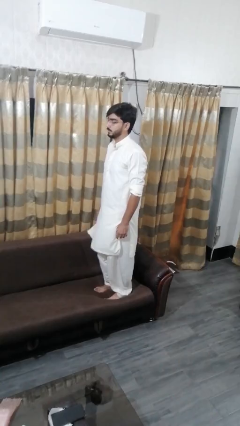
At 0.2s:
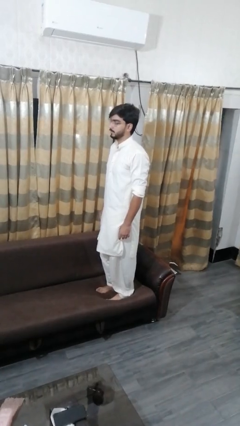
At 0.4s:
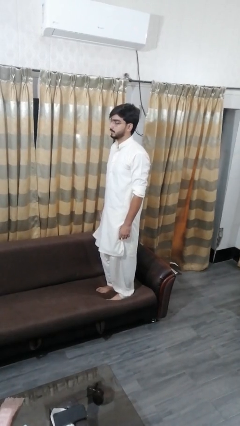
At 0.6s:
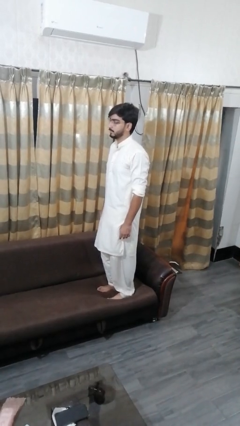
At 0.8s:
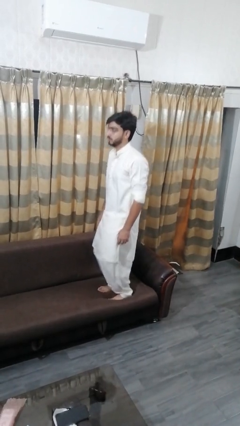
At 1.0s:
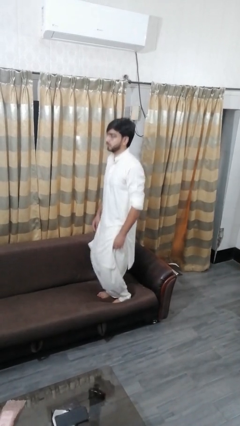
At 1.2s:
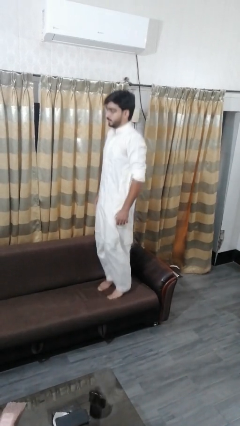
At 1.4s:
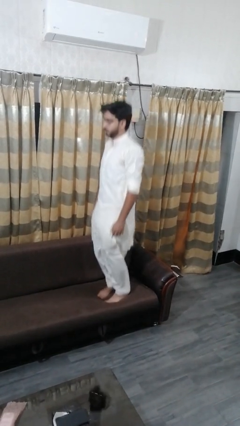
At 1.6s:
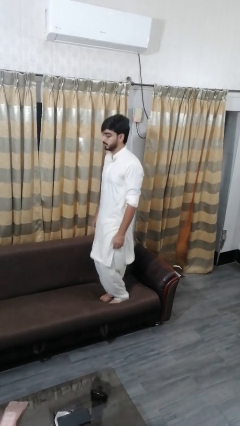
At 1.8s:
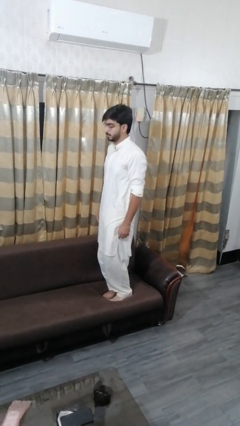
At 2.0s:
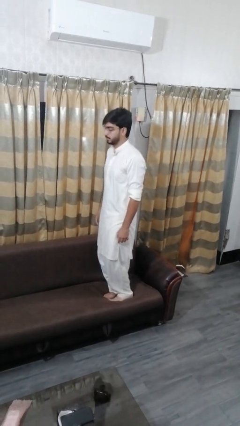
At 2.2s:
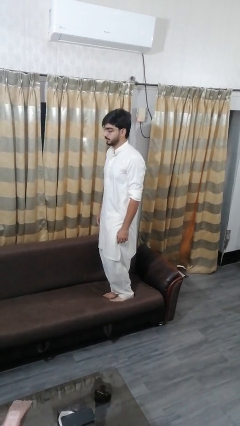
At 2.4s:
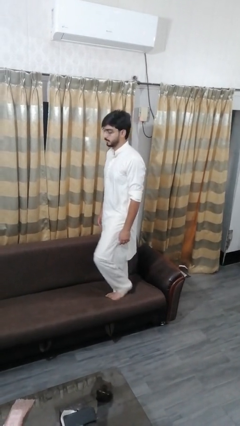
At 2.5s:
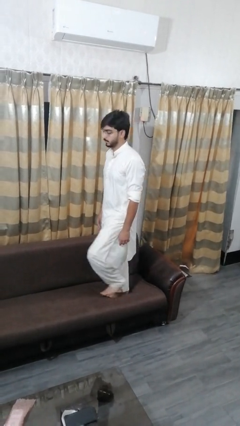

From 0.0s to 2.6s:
person jumps on couch

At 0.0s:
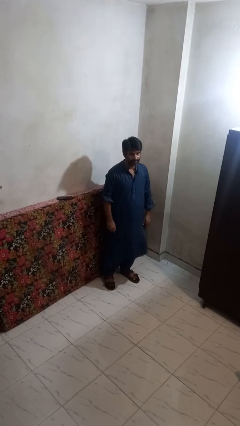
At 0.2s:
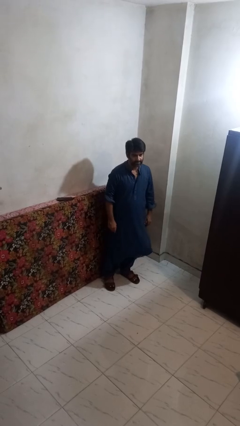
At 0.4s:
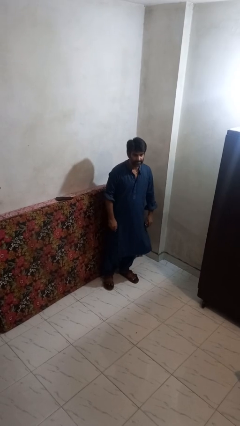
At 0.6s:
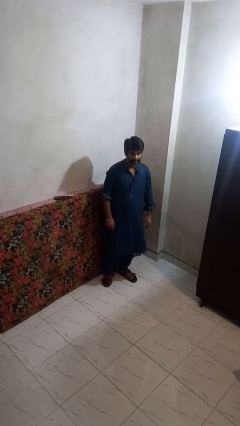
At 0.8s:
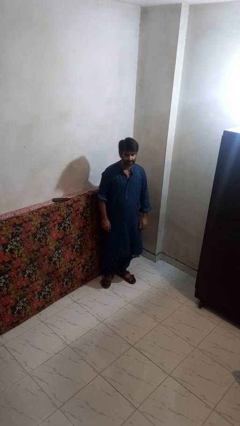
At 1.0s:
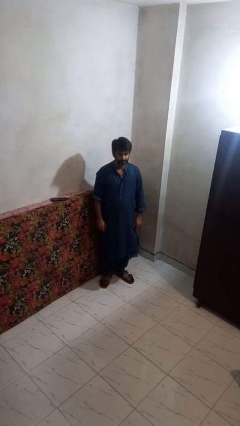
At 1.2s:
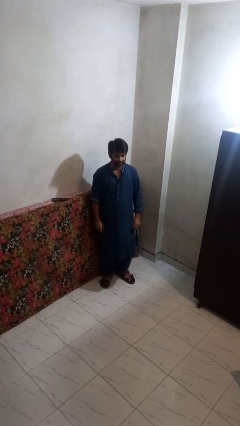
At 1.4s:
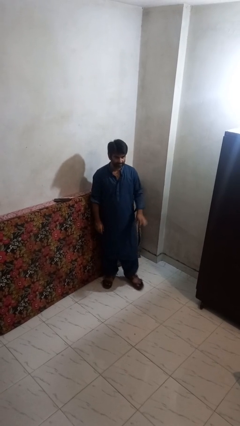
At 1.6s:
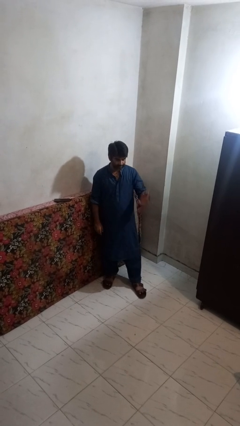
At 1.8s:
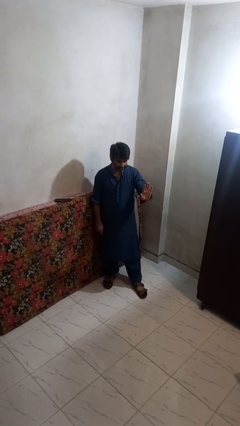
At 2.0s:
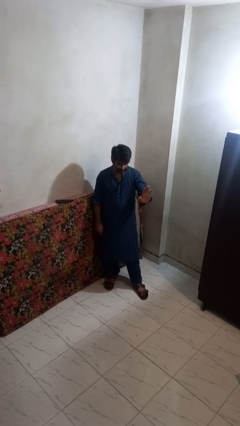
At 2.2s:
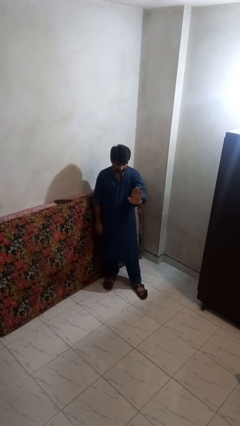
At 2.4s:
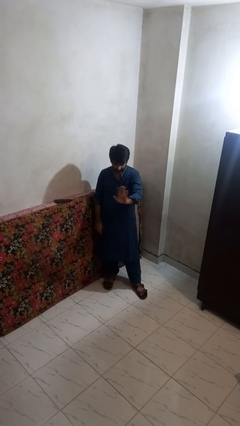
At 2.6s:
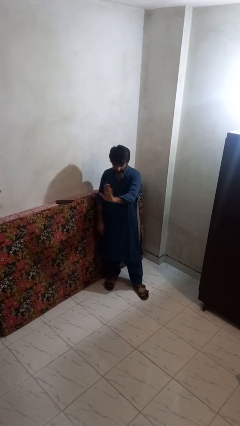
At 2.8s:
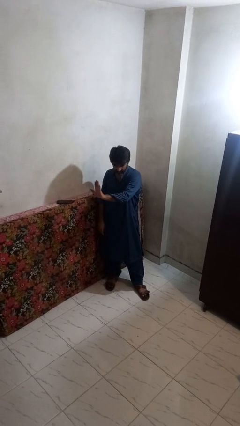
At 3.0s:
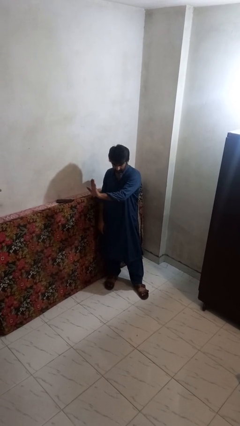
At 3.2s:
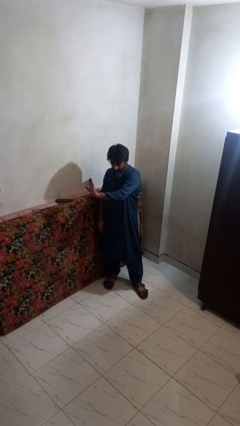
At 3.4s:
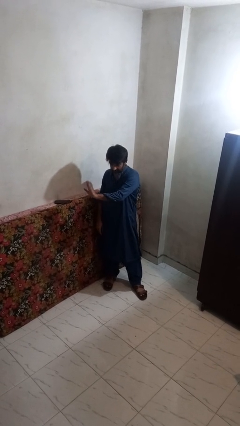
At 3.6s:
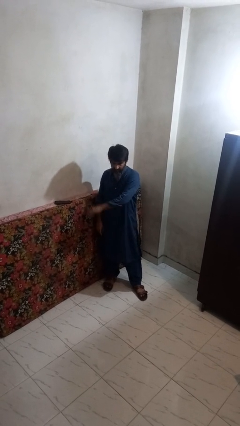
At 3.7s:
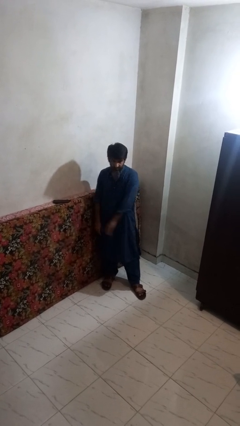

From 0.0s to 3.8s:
person gestures swipe right

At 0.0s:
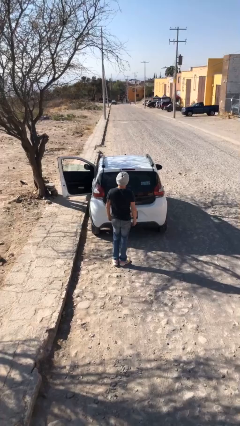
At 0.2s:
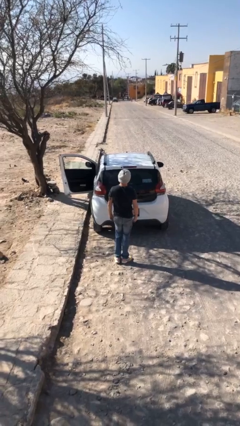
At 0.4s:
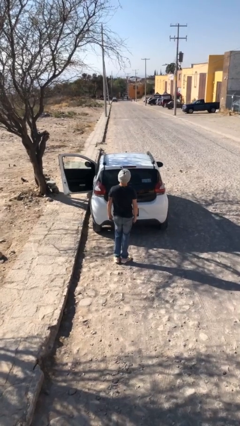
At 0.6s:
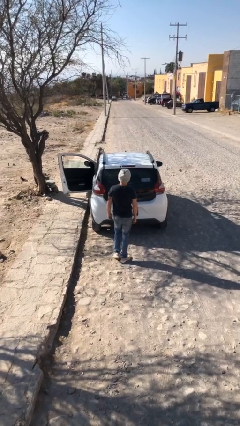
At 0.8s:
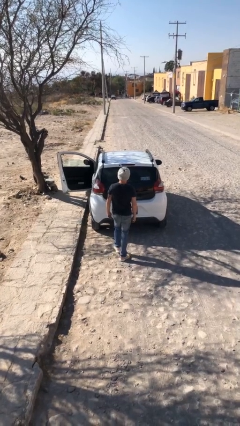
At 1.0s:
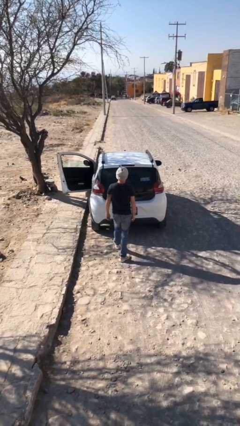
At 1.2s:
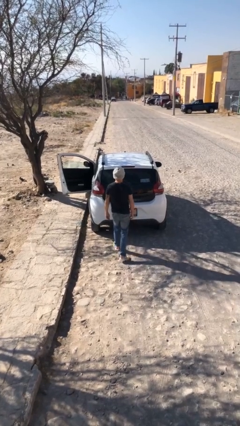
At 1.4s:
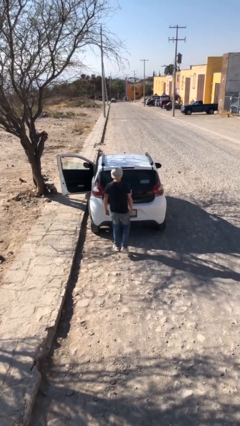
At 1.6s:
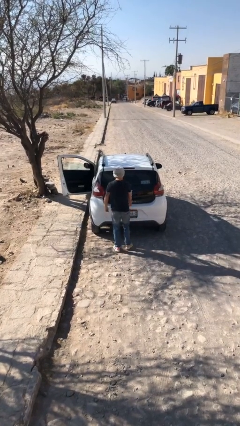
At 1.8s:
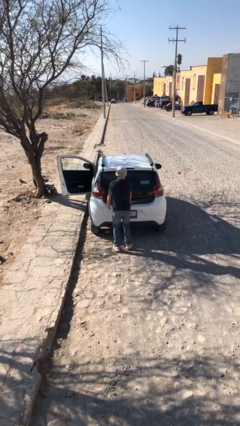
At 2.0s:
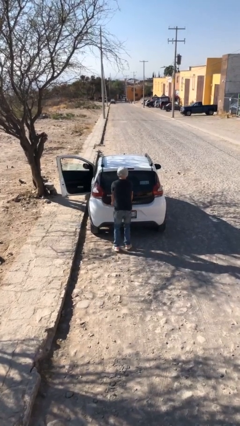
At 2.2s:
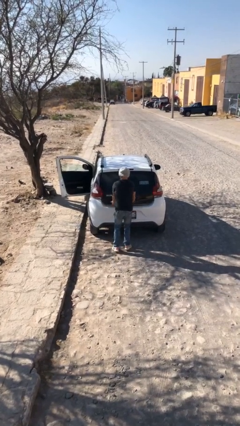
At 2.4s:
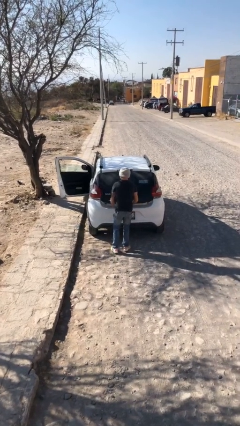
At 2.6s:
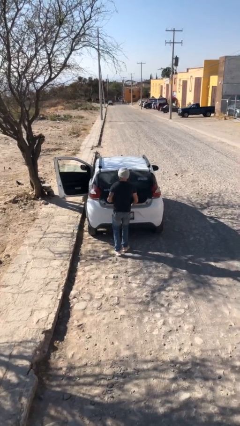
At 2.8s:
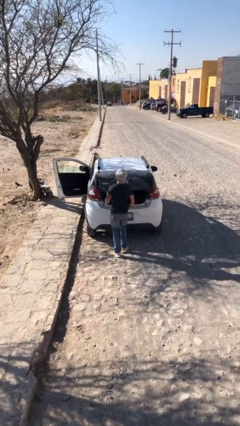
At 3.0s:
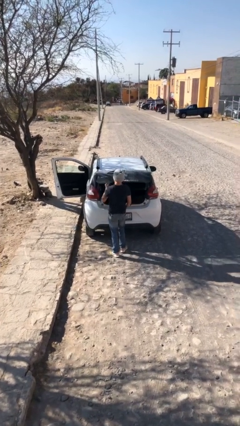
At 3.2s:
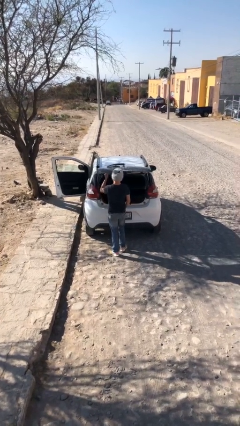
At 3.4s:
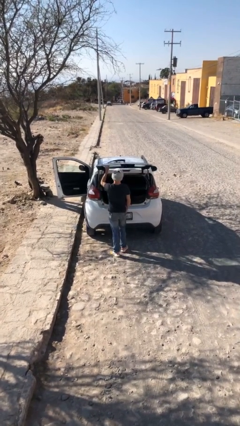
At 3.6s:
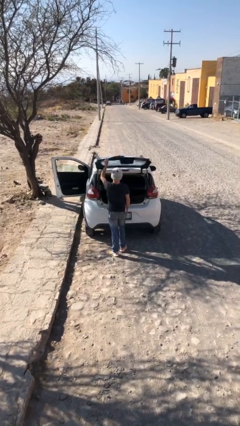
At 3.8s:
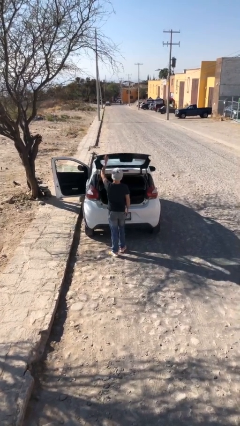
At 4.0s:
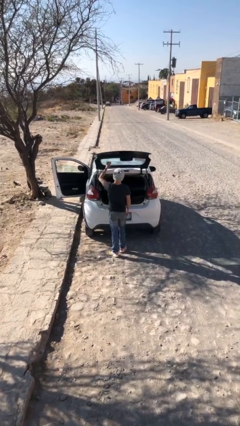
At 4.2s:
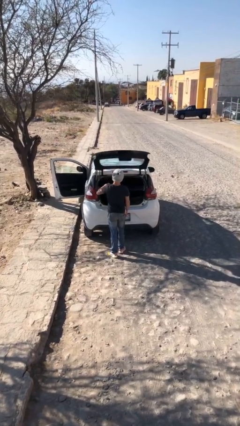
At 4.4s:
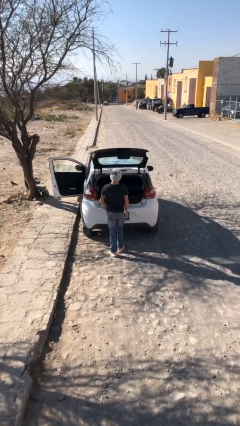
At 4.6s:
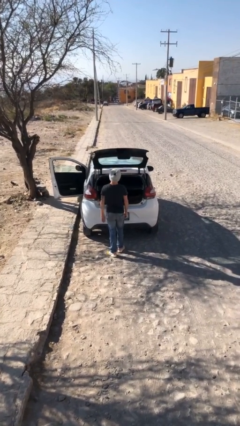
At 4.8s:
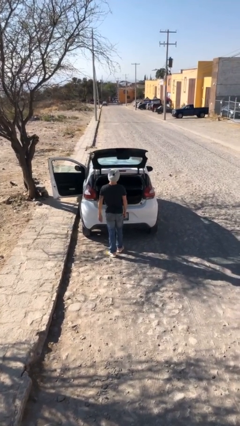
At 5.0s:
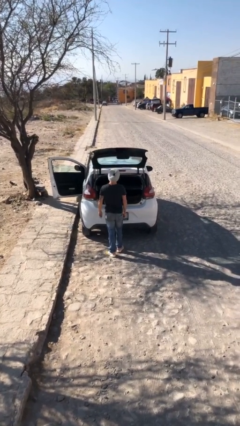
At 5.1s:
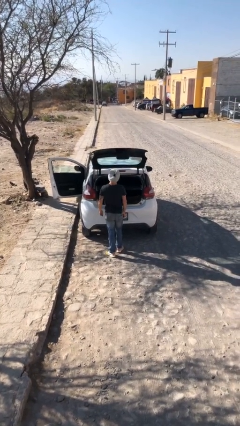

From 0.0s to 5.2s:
person opens car trunk

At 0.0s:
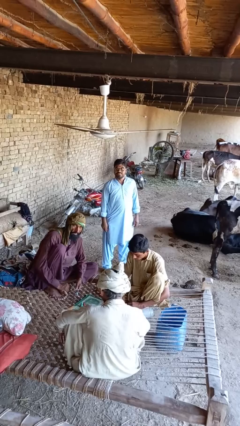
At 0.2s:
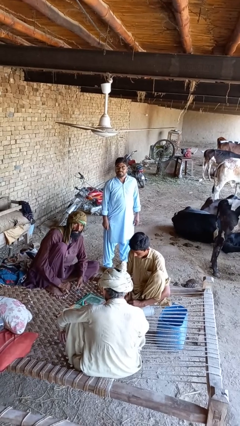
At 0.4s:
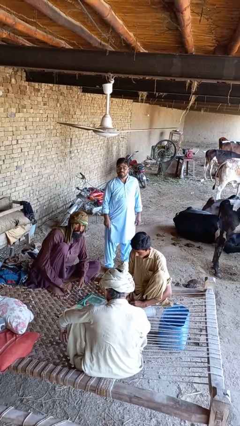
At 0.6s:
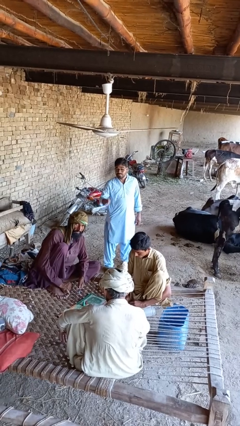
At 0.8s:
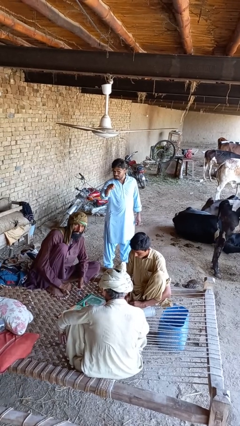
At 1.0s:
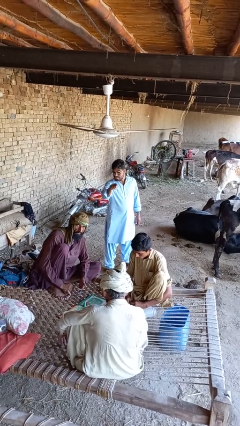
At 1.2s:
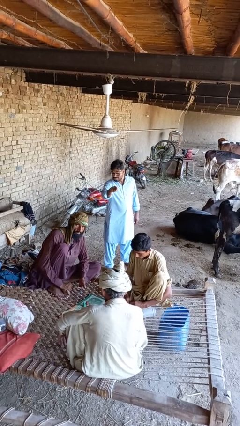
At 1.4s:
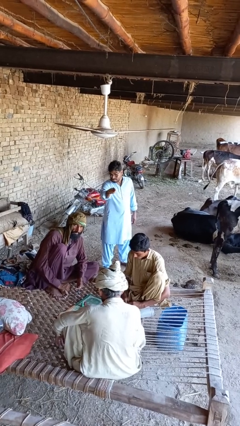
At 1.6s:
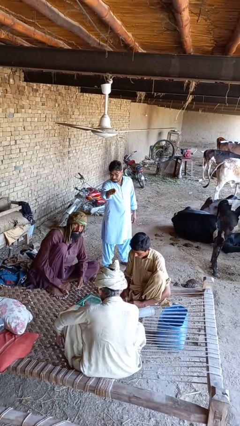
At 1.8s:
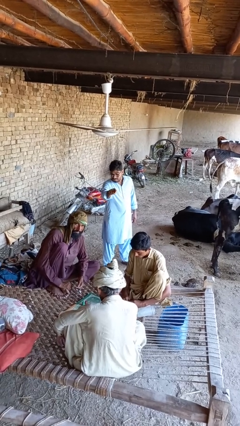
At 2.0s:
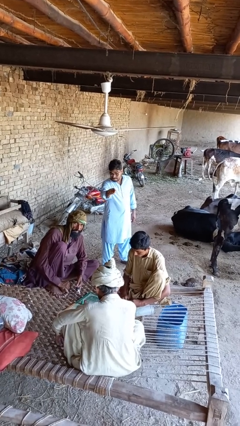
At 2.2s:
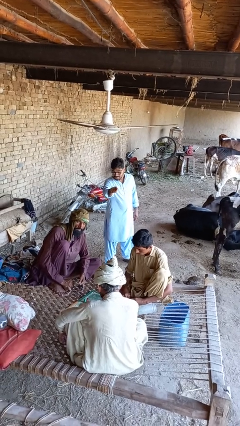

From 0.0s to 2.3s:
person points at person

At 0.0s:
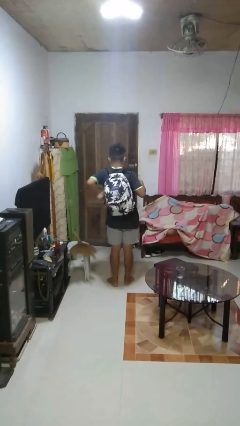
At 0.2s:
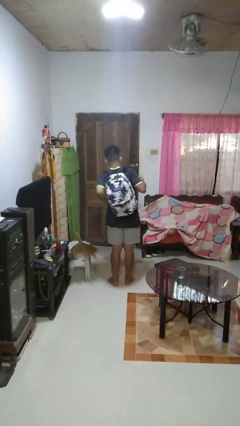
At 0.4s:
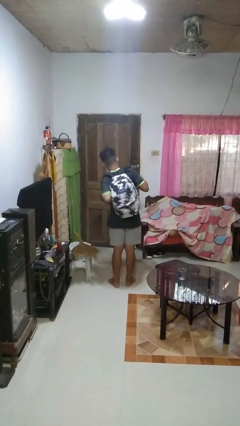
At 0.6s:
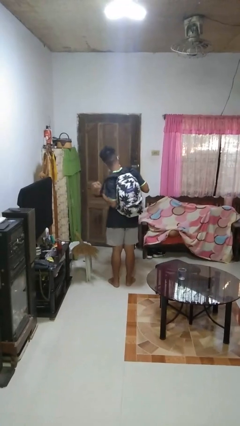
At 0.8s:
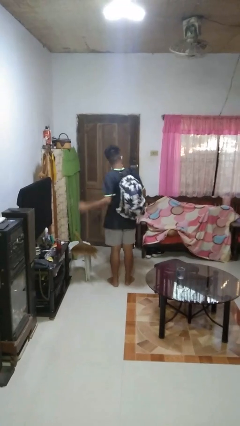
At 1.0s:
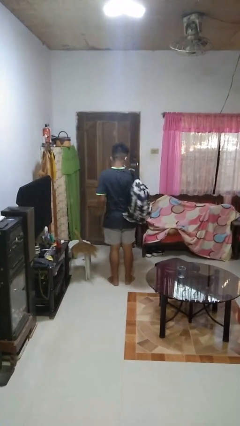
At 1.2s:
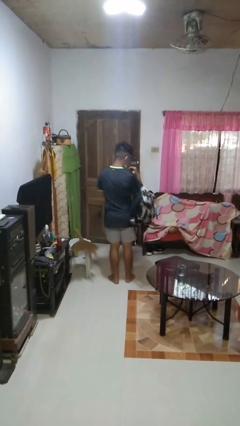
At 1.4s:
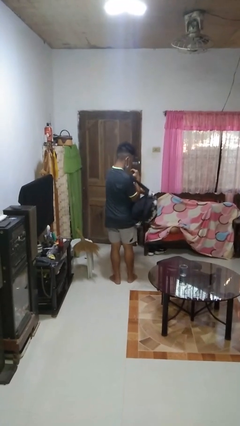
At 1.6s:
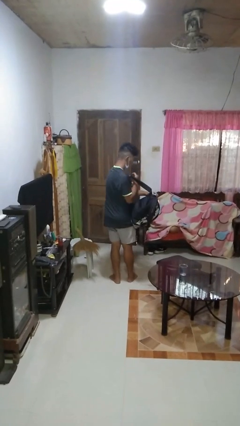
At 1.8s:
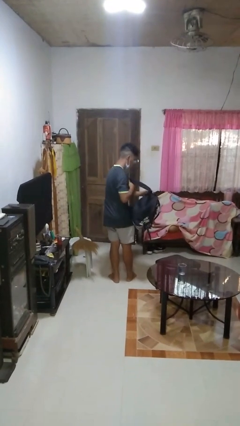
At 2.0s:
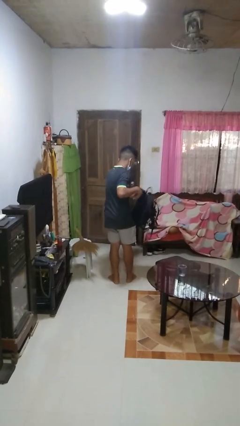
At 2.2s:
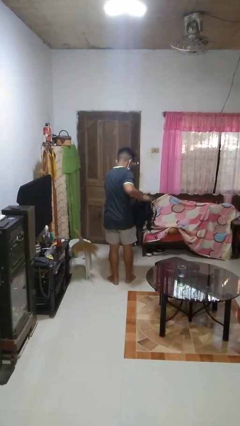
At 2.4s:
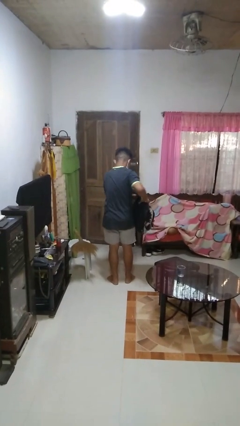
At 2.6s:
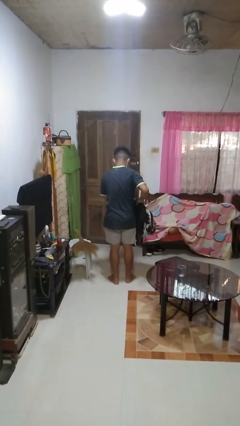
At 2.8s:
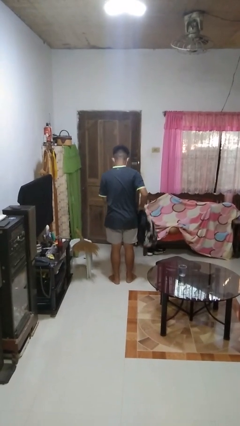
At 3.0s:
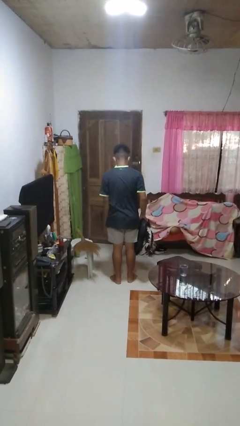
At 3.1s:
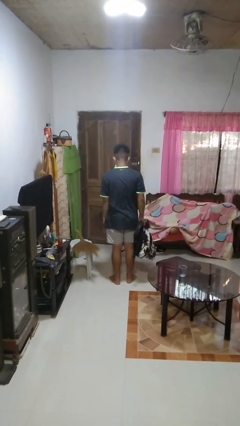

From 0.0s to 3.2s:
person takes off backpack

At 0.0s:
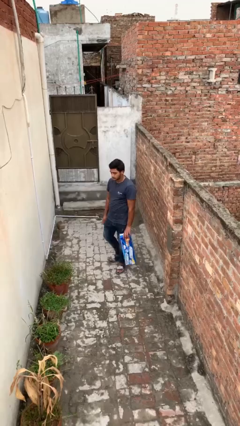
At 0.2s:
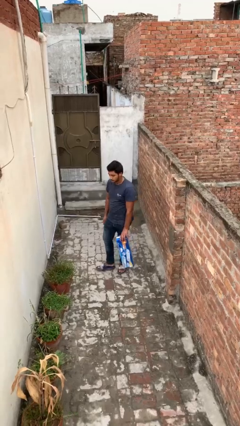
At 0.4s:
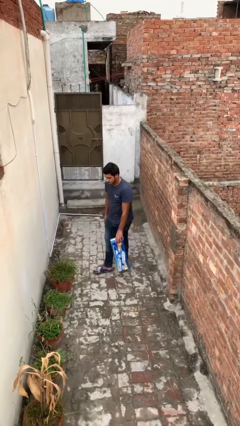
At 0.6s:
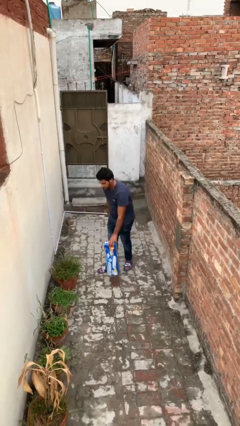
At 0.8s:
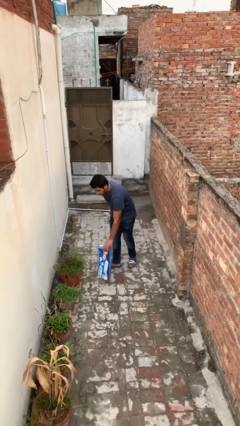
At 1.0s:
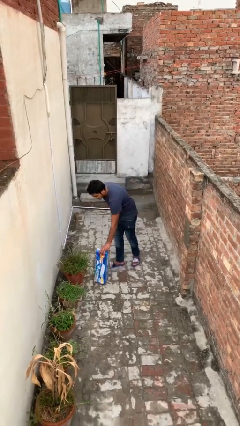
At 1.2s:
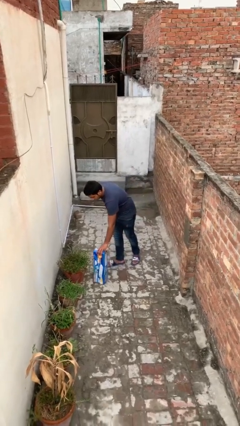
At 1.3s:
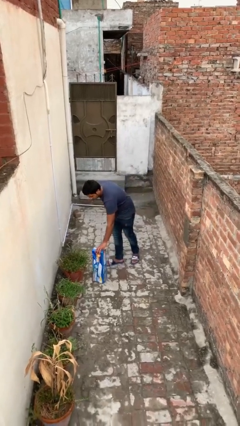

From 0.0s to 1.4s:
person puts down object on floor
